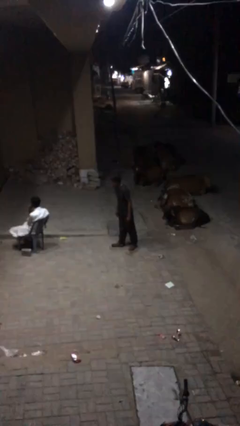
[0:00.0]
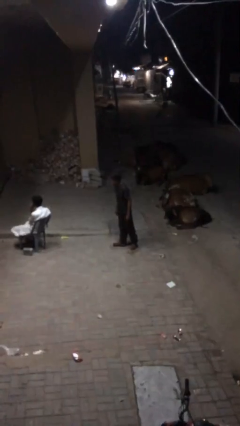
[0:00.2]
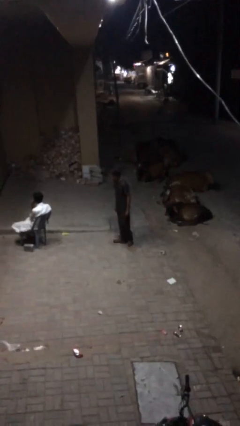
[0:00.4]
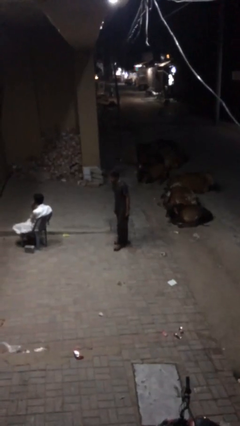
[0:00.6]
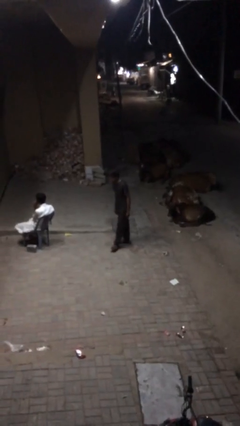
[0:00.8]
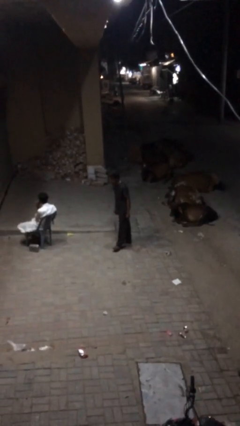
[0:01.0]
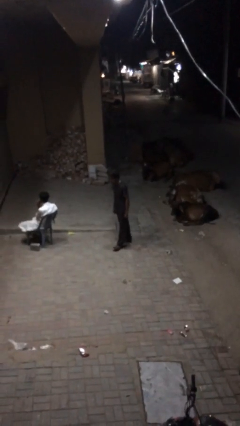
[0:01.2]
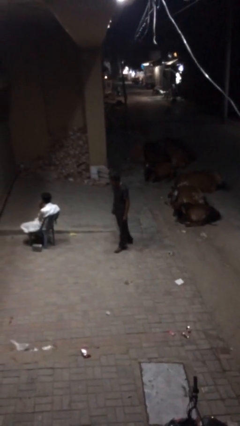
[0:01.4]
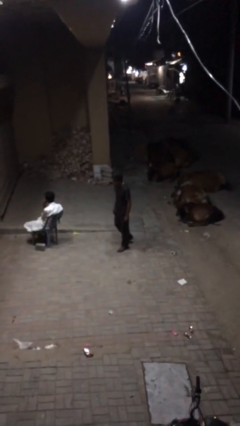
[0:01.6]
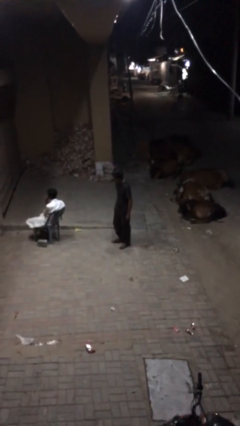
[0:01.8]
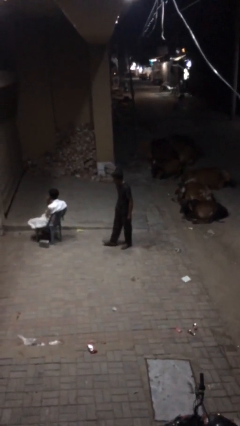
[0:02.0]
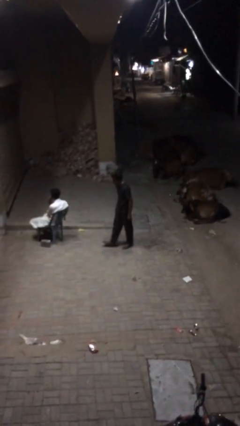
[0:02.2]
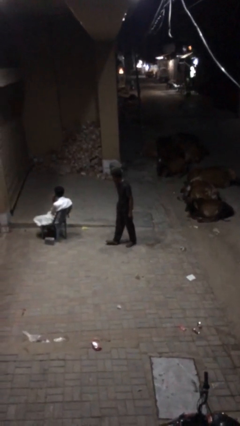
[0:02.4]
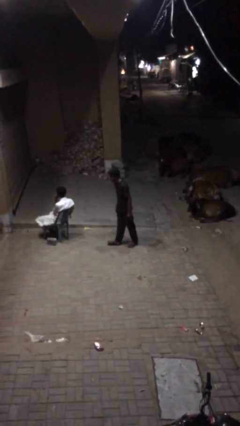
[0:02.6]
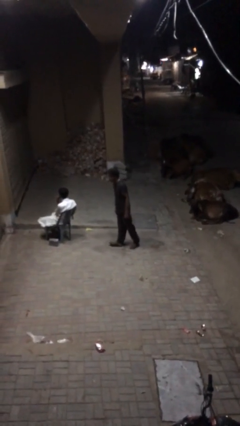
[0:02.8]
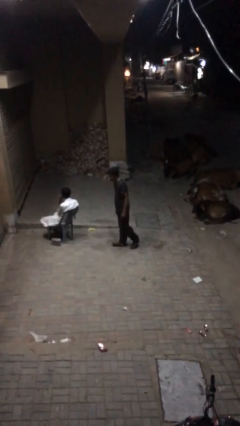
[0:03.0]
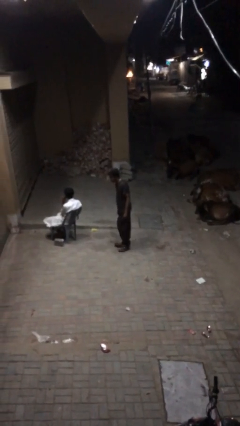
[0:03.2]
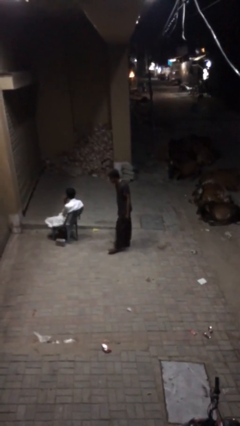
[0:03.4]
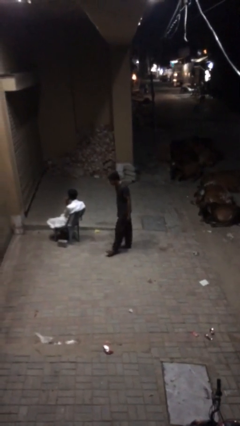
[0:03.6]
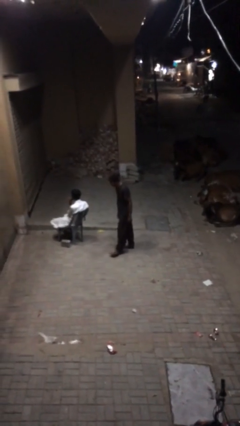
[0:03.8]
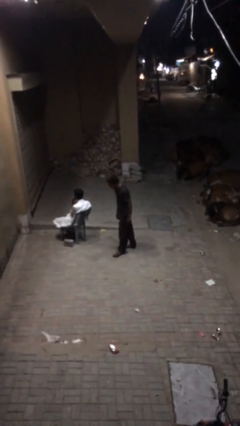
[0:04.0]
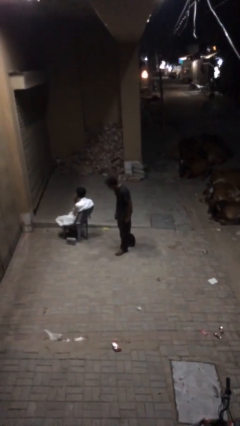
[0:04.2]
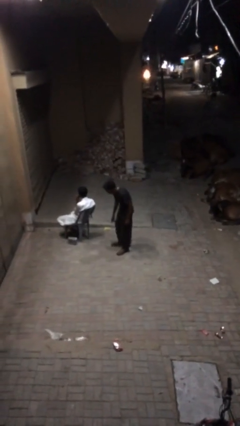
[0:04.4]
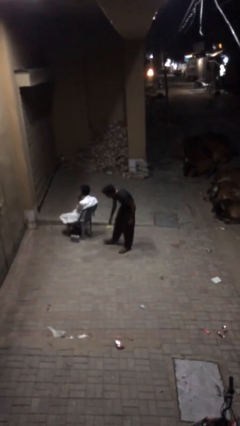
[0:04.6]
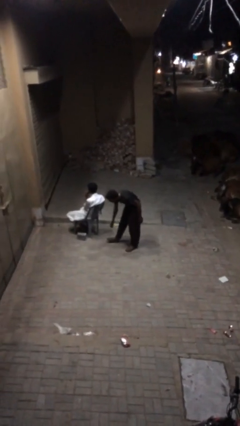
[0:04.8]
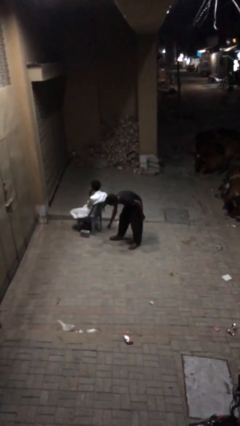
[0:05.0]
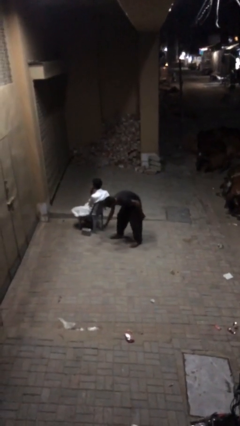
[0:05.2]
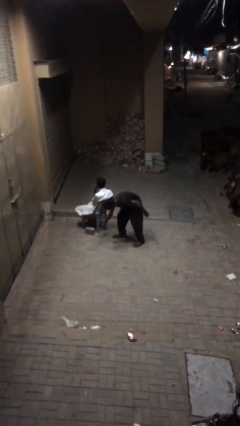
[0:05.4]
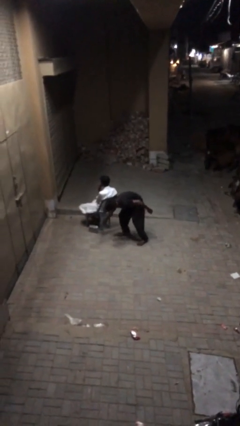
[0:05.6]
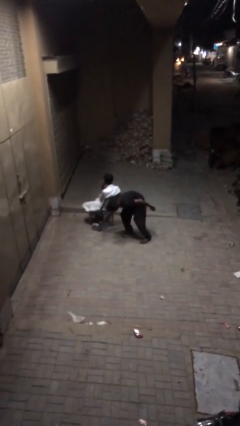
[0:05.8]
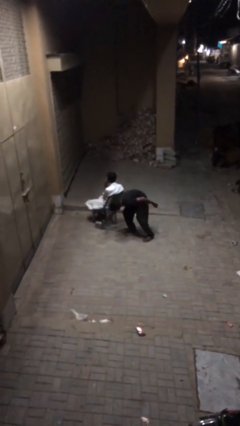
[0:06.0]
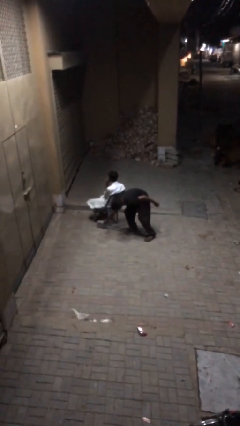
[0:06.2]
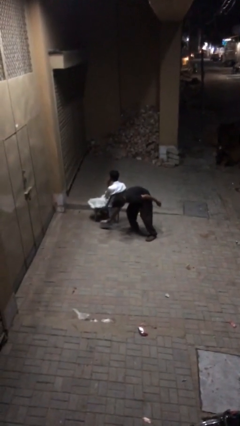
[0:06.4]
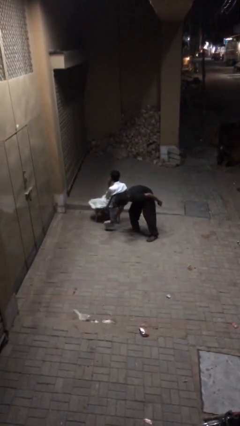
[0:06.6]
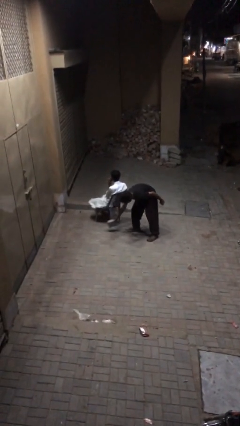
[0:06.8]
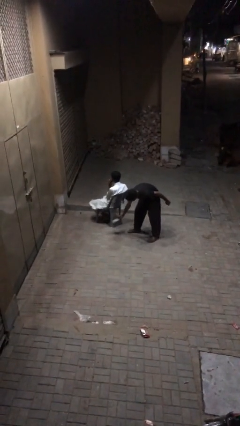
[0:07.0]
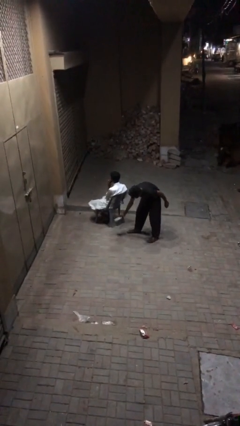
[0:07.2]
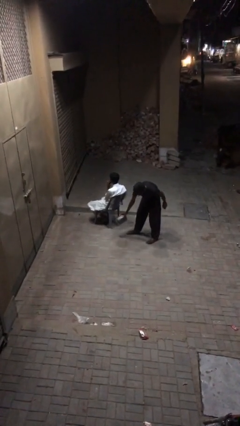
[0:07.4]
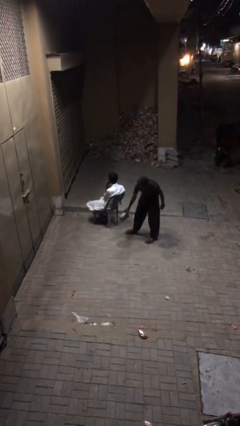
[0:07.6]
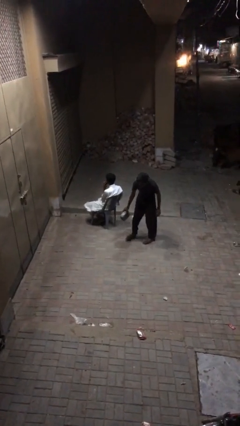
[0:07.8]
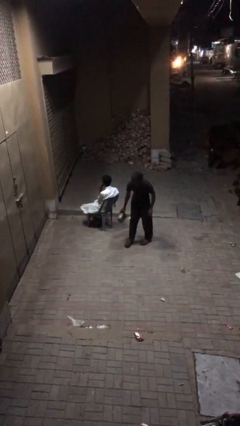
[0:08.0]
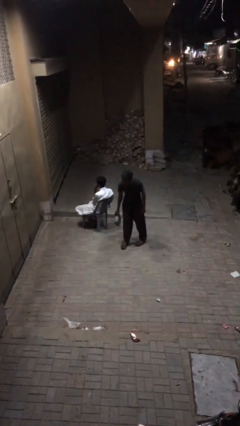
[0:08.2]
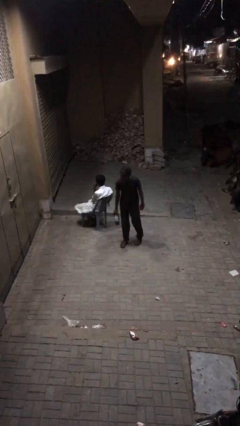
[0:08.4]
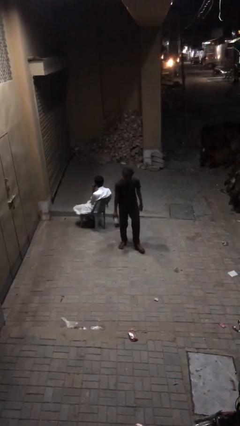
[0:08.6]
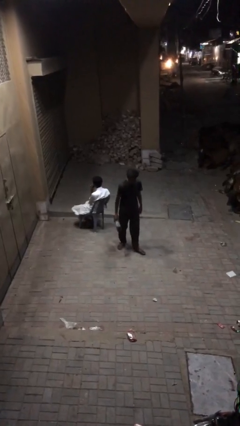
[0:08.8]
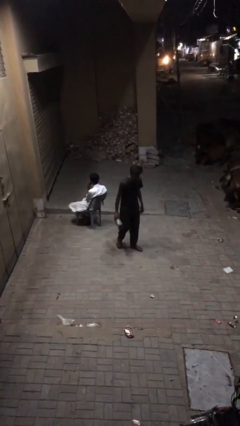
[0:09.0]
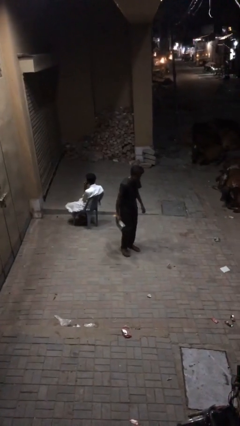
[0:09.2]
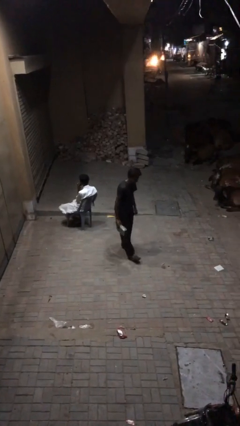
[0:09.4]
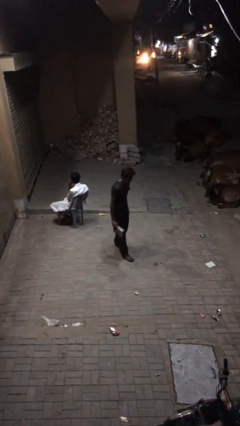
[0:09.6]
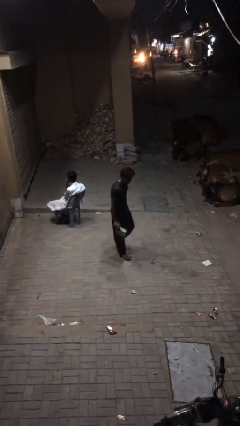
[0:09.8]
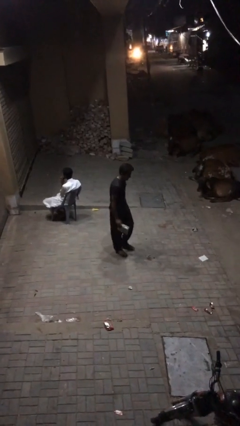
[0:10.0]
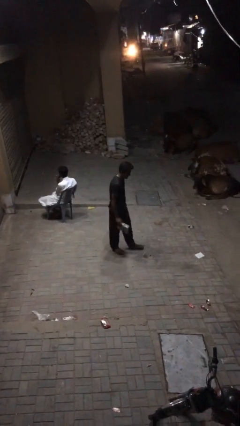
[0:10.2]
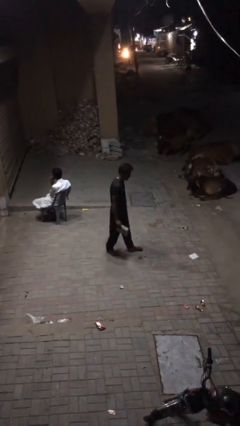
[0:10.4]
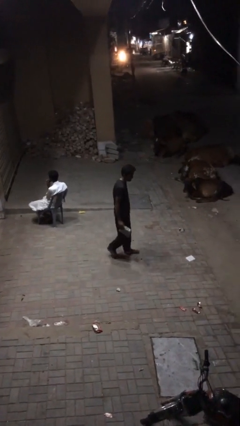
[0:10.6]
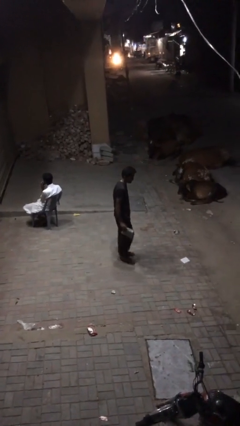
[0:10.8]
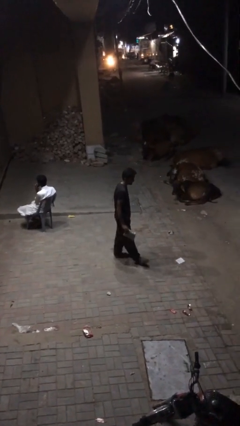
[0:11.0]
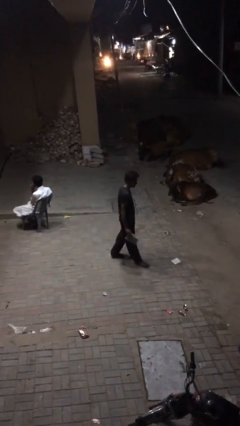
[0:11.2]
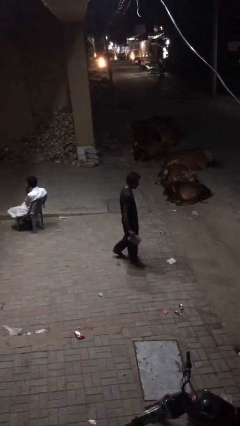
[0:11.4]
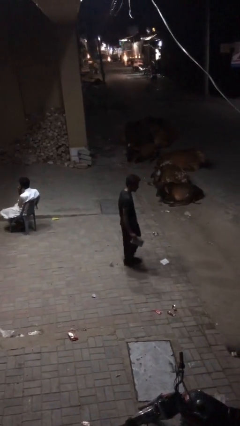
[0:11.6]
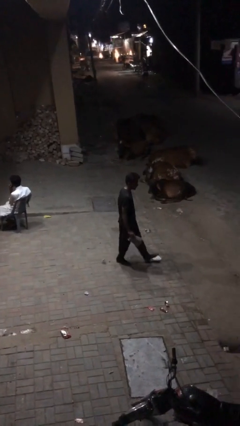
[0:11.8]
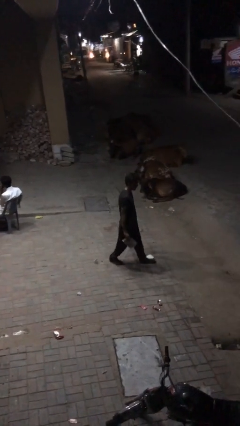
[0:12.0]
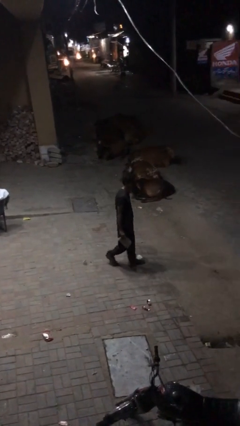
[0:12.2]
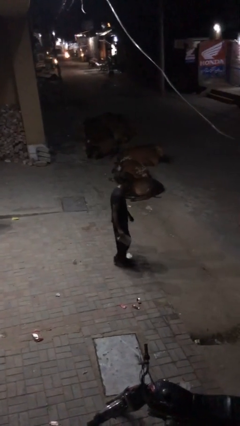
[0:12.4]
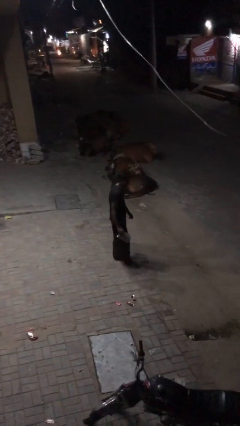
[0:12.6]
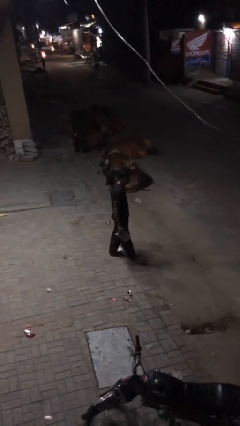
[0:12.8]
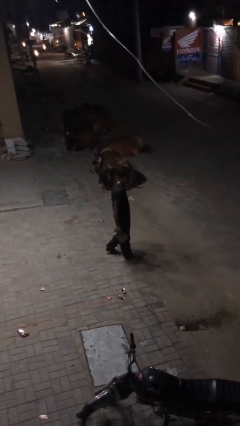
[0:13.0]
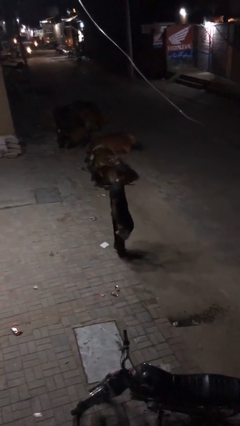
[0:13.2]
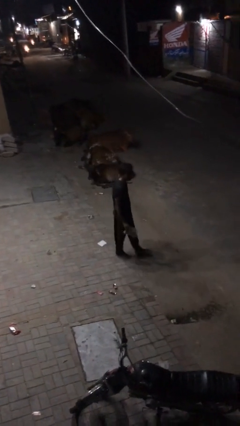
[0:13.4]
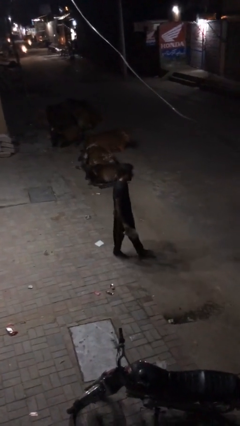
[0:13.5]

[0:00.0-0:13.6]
person steals object from person

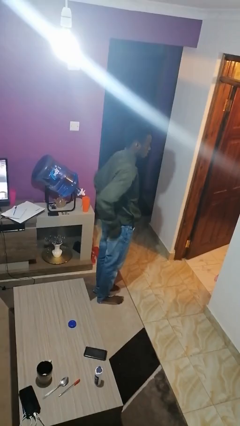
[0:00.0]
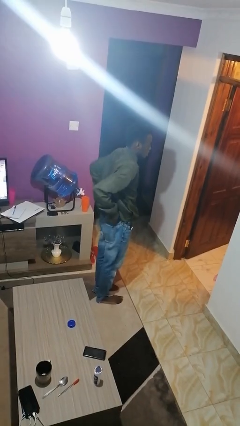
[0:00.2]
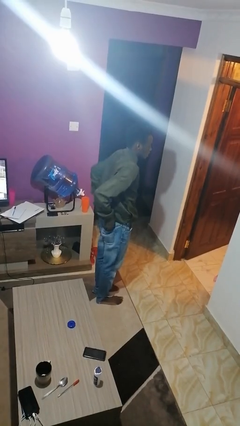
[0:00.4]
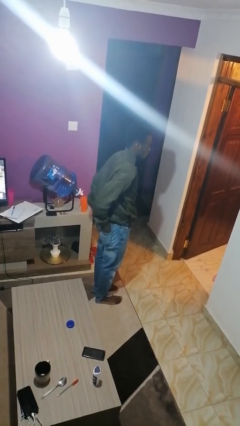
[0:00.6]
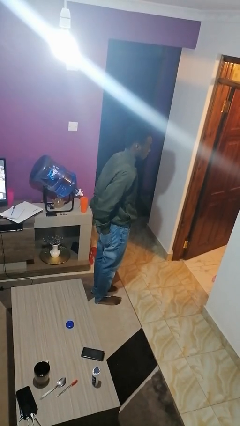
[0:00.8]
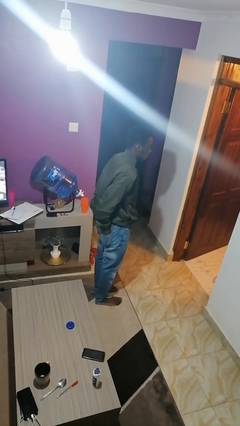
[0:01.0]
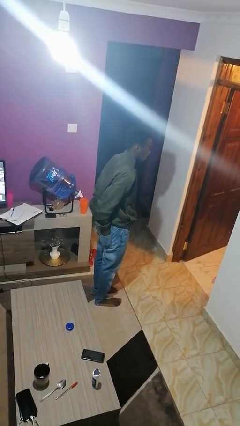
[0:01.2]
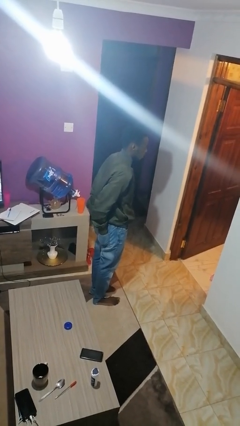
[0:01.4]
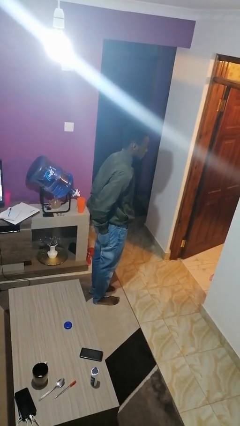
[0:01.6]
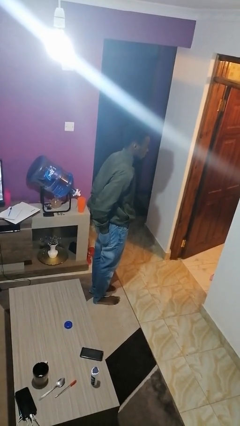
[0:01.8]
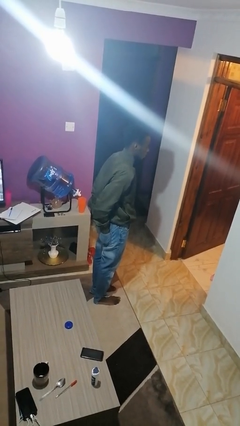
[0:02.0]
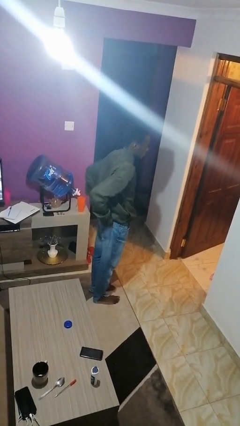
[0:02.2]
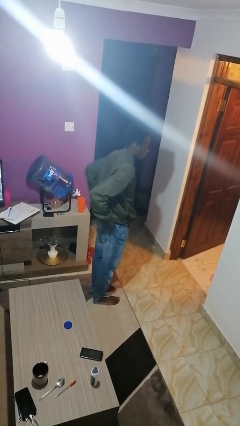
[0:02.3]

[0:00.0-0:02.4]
person puts hands in back pockets

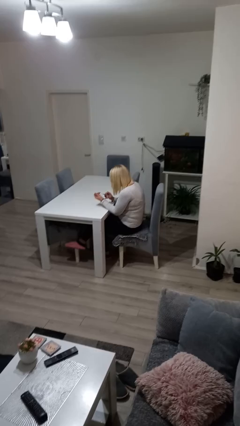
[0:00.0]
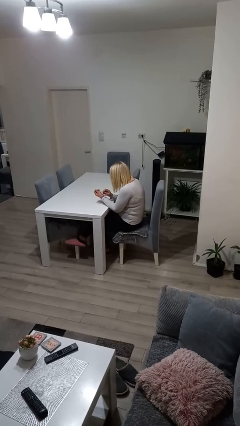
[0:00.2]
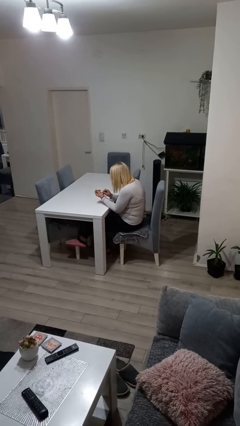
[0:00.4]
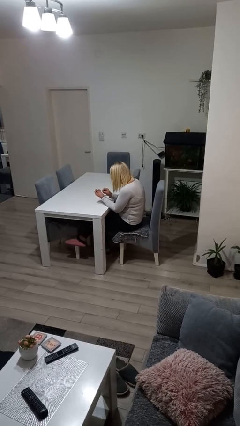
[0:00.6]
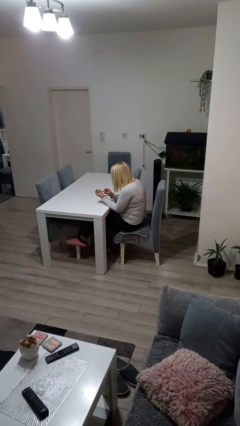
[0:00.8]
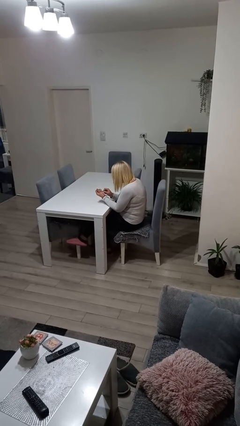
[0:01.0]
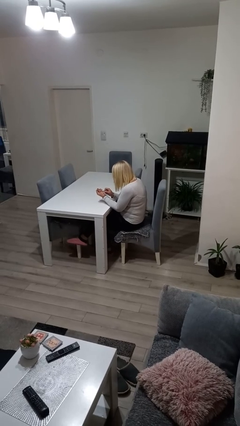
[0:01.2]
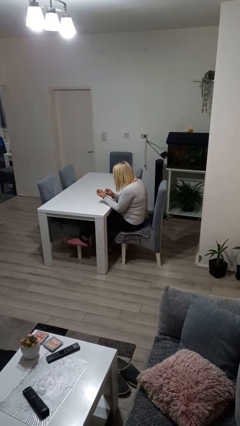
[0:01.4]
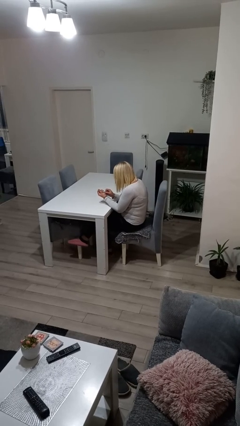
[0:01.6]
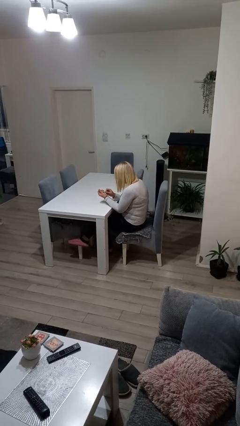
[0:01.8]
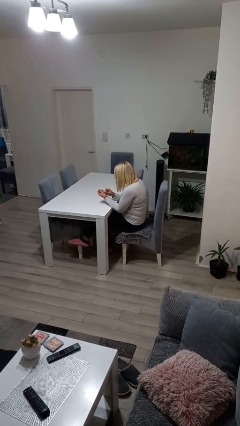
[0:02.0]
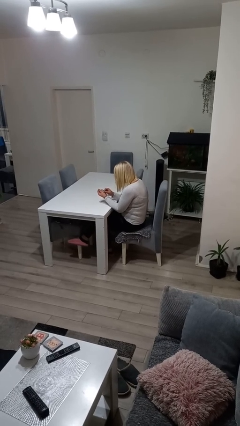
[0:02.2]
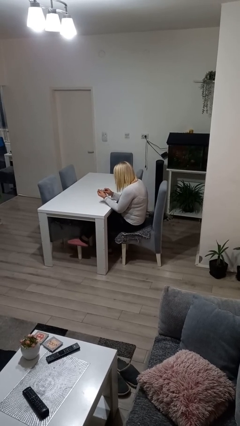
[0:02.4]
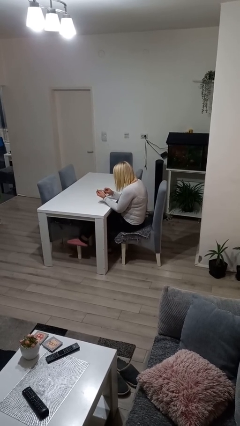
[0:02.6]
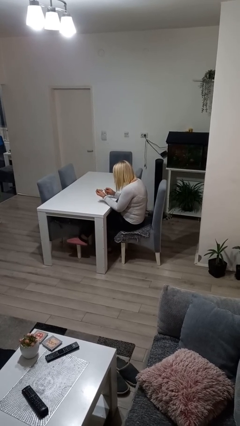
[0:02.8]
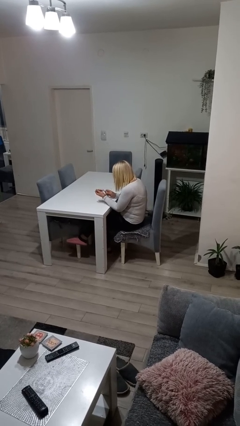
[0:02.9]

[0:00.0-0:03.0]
person files fingernails
